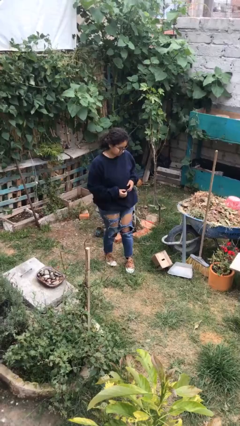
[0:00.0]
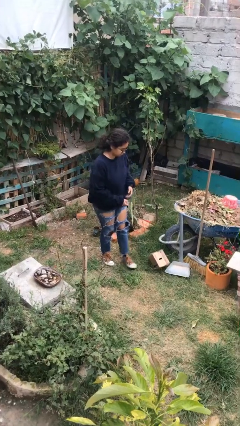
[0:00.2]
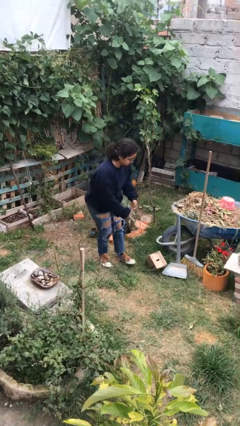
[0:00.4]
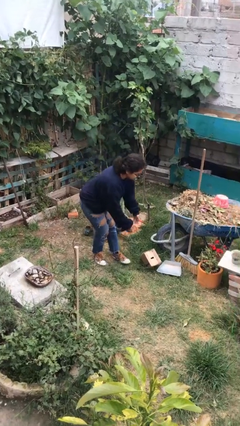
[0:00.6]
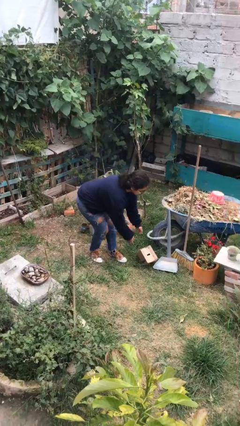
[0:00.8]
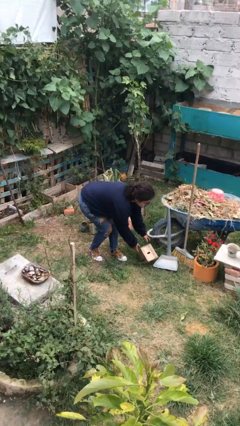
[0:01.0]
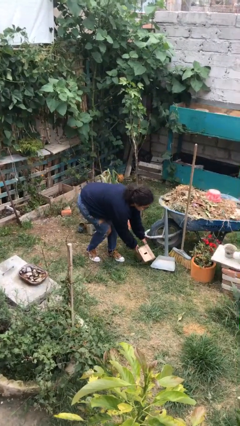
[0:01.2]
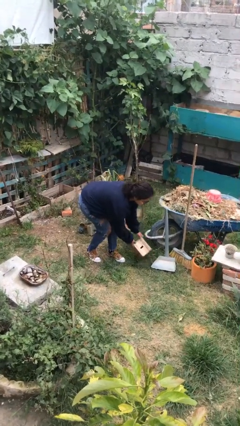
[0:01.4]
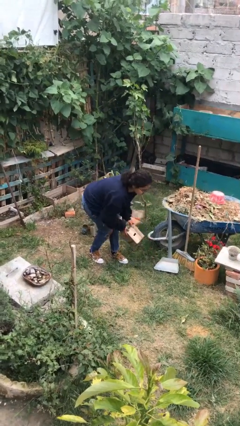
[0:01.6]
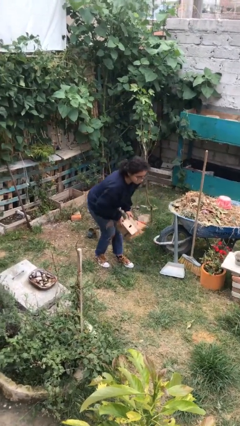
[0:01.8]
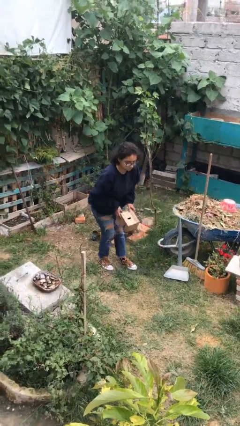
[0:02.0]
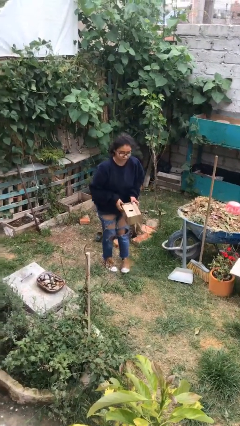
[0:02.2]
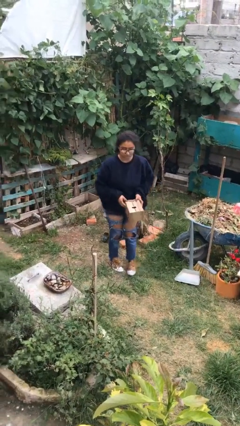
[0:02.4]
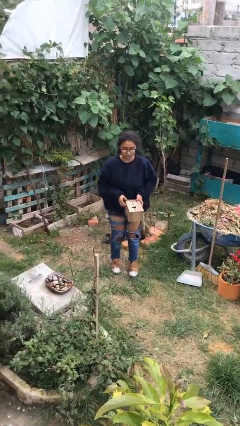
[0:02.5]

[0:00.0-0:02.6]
person picks up object from floor

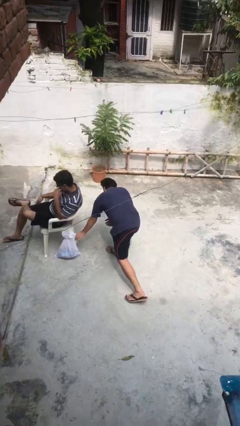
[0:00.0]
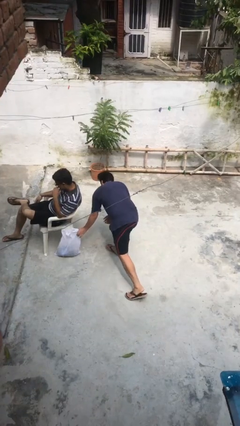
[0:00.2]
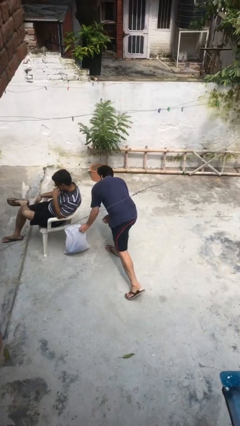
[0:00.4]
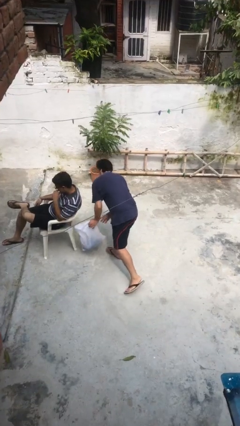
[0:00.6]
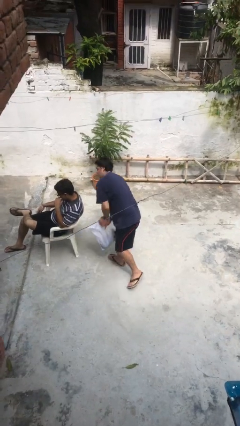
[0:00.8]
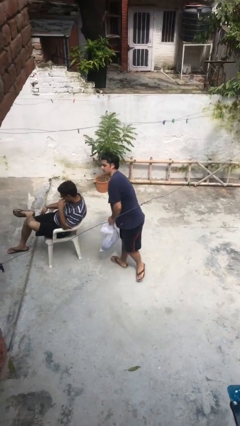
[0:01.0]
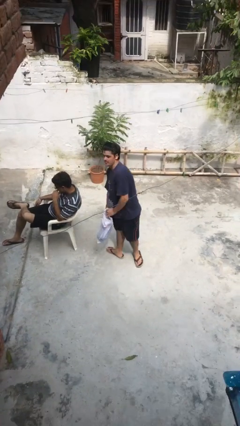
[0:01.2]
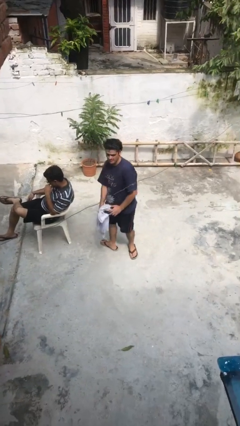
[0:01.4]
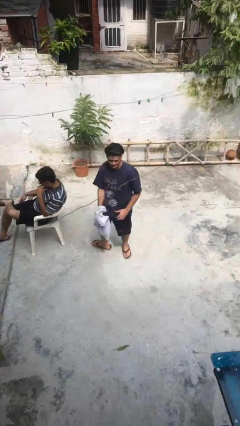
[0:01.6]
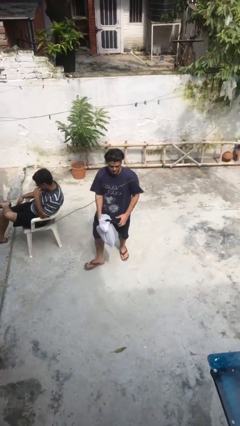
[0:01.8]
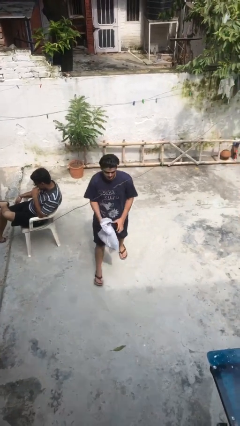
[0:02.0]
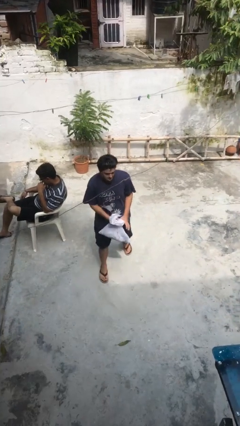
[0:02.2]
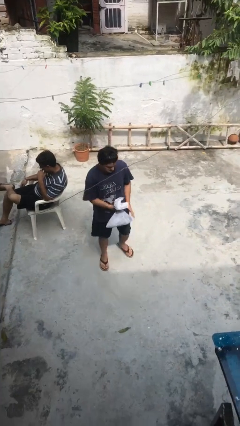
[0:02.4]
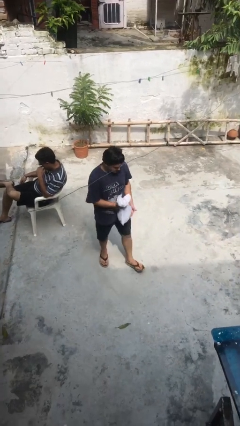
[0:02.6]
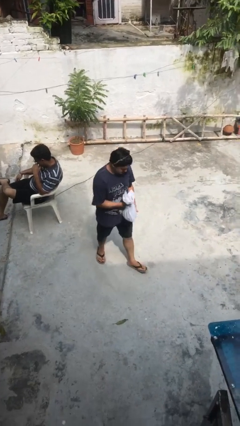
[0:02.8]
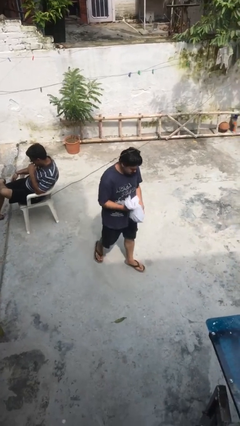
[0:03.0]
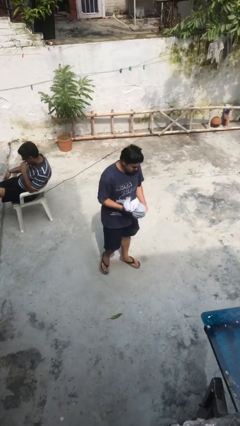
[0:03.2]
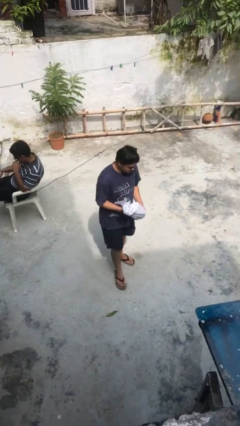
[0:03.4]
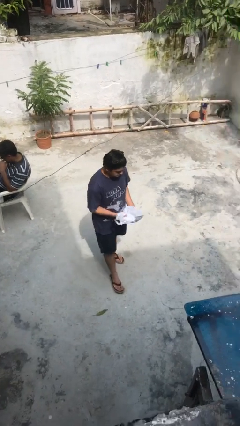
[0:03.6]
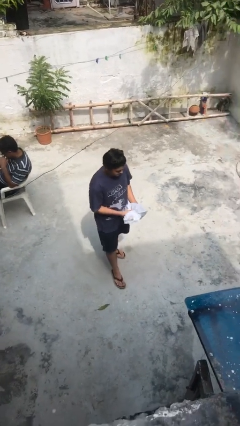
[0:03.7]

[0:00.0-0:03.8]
person steals object from person

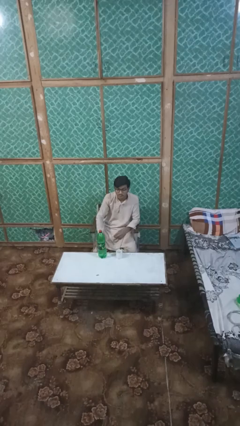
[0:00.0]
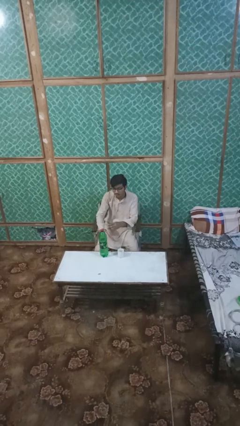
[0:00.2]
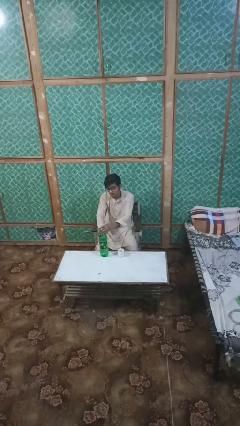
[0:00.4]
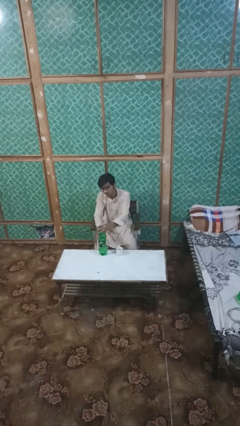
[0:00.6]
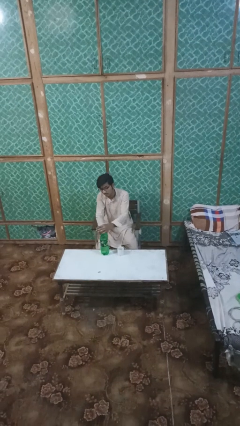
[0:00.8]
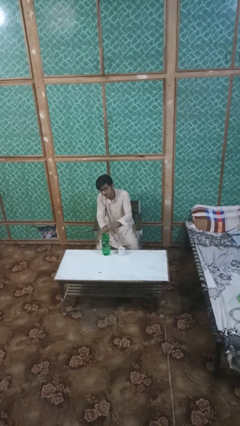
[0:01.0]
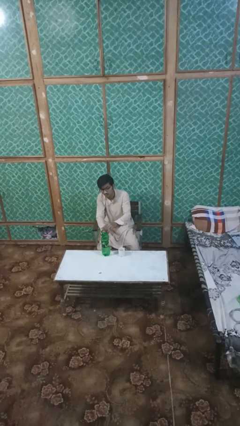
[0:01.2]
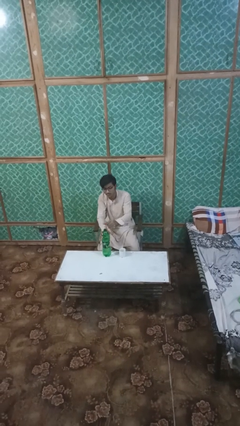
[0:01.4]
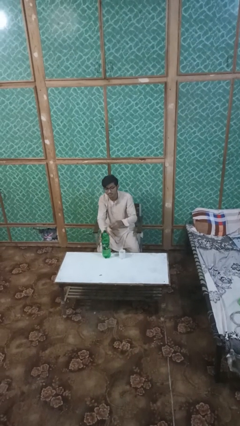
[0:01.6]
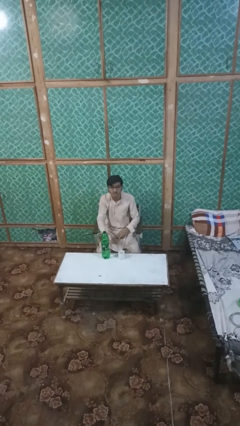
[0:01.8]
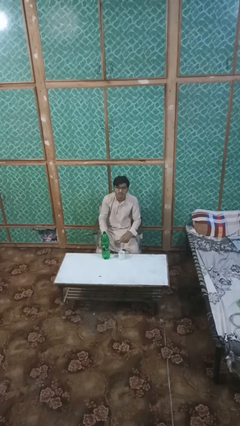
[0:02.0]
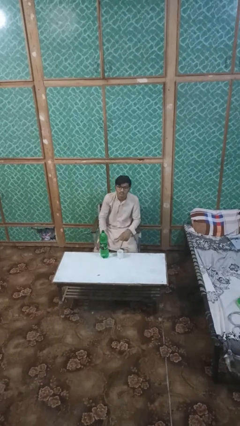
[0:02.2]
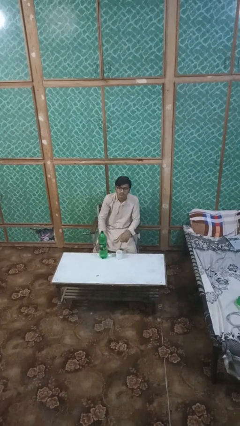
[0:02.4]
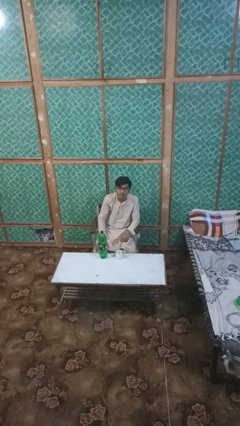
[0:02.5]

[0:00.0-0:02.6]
person unscrews lid from bottle

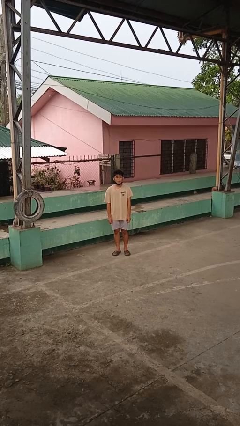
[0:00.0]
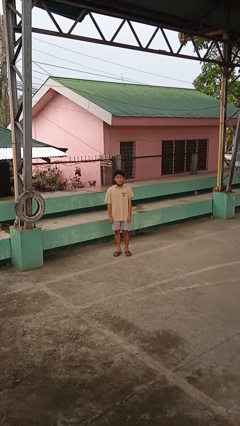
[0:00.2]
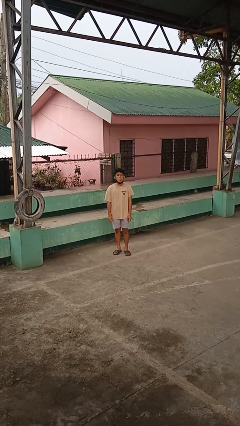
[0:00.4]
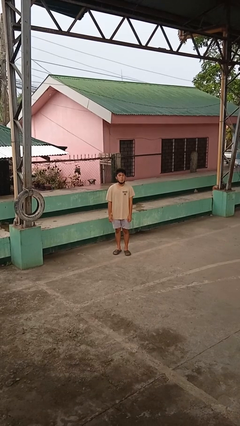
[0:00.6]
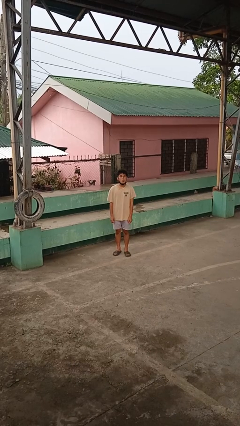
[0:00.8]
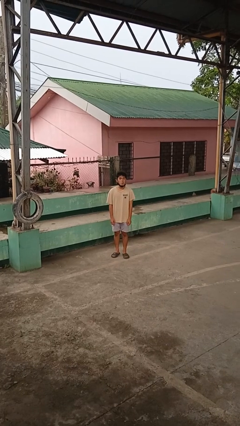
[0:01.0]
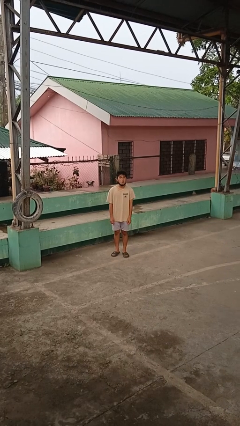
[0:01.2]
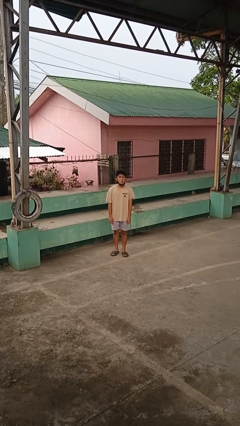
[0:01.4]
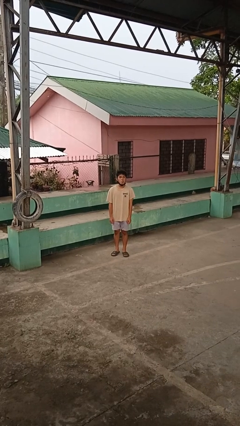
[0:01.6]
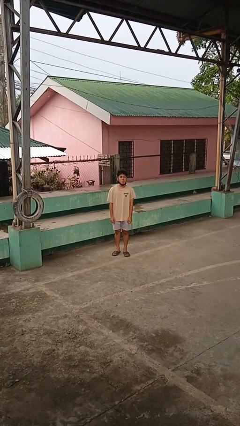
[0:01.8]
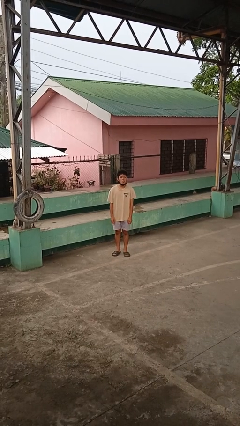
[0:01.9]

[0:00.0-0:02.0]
person sticks out tongue

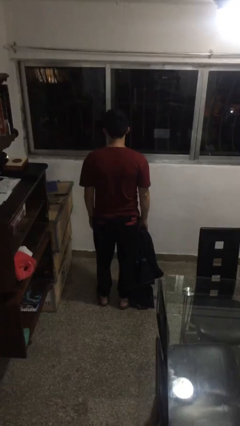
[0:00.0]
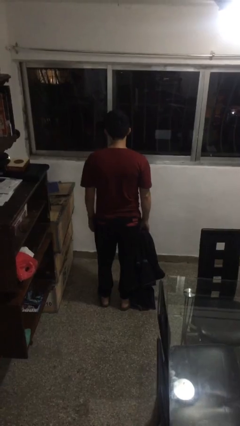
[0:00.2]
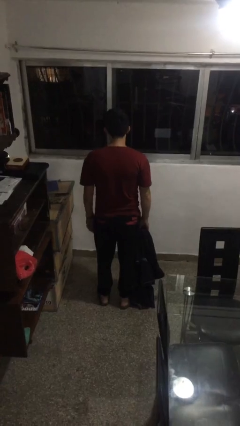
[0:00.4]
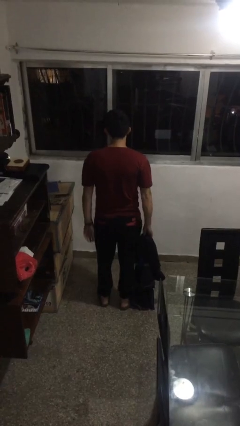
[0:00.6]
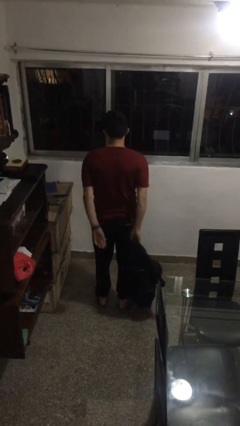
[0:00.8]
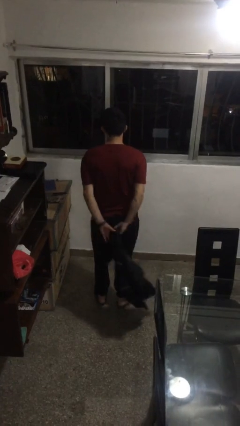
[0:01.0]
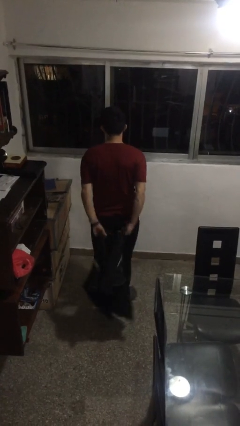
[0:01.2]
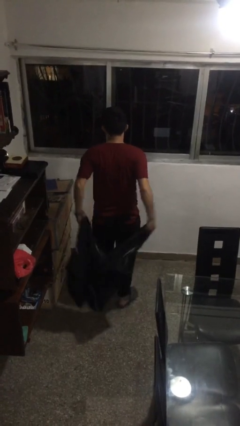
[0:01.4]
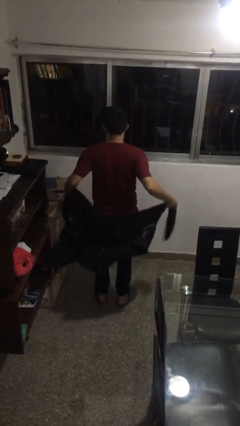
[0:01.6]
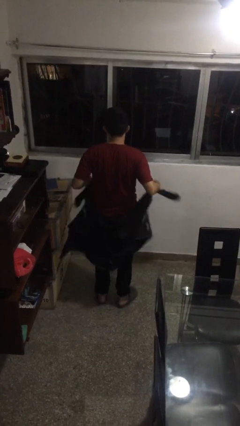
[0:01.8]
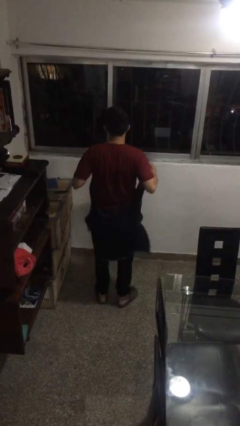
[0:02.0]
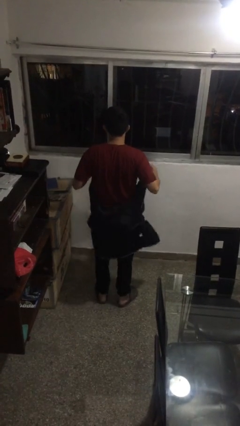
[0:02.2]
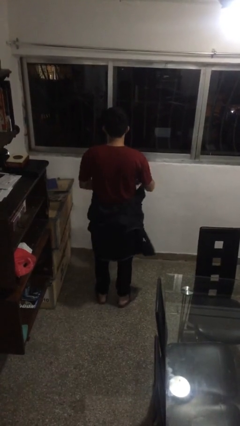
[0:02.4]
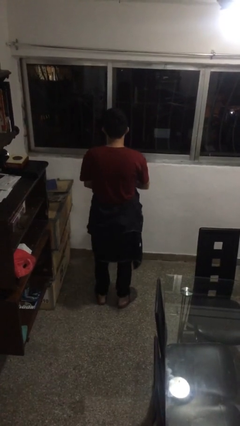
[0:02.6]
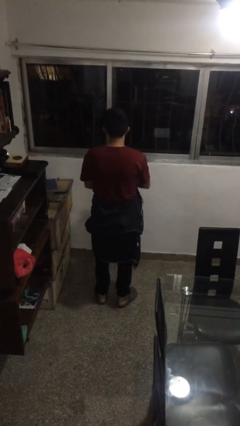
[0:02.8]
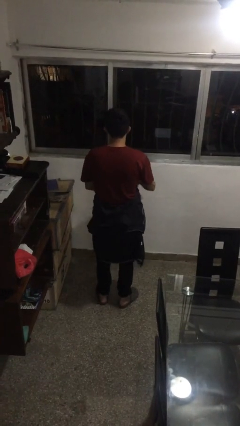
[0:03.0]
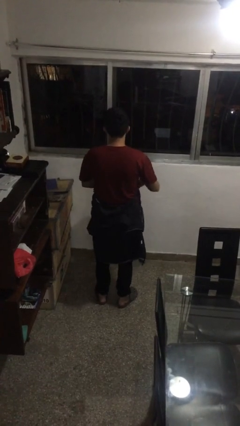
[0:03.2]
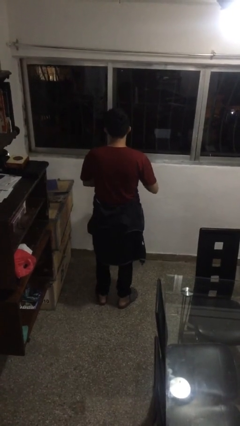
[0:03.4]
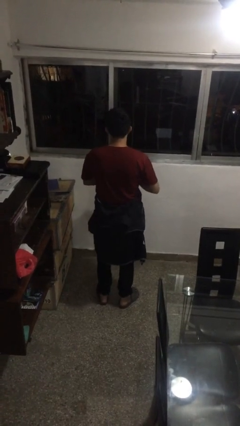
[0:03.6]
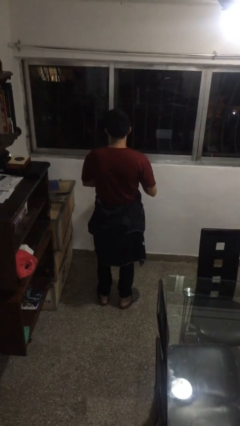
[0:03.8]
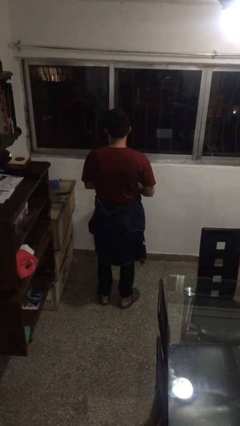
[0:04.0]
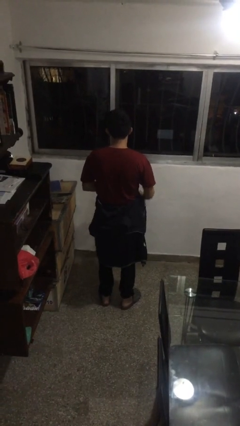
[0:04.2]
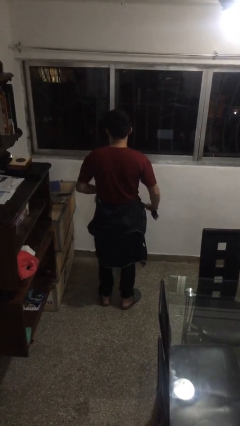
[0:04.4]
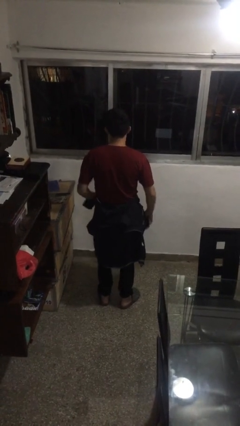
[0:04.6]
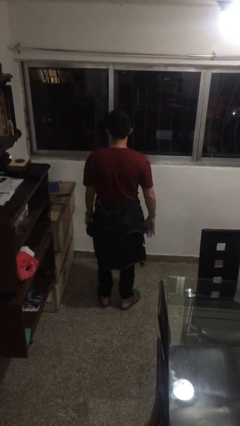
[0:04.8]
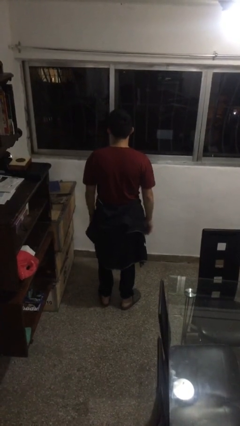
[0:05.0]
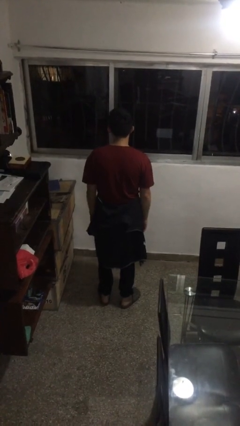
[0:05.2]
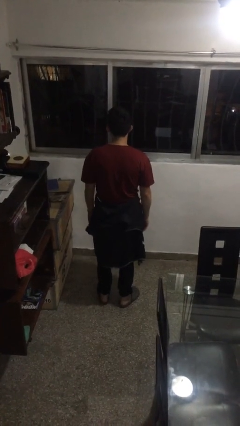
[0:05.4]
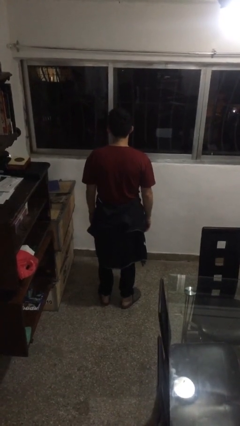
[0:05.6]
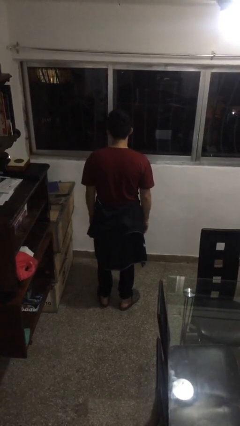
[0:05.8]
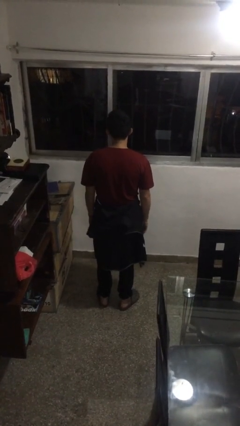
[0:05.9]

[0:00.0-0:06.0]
person ties jacket around waist
